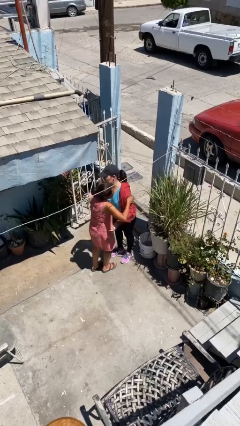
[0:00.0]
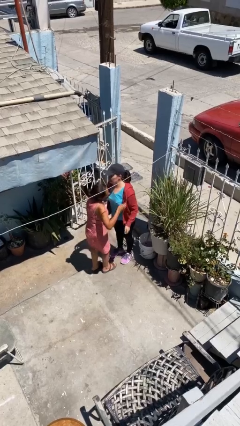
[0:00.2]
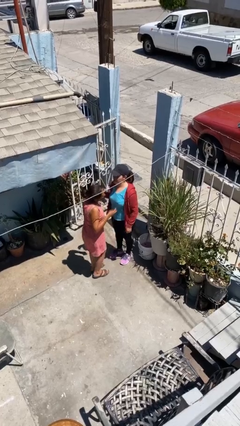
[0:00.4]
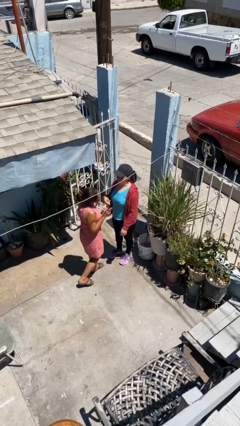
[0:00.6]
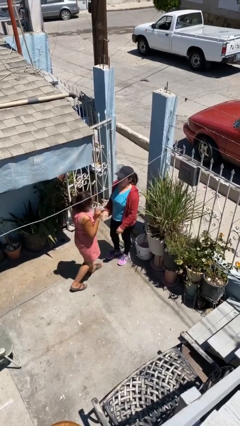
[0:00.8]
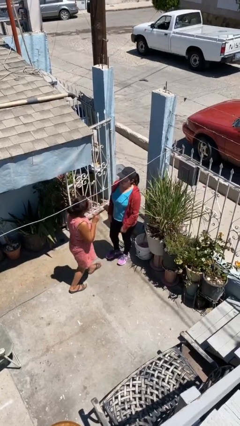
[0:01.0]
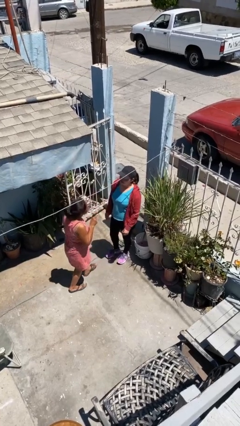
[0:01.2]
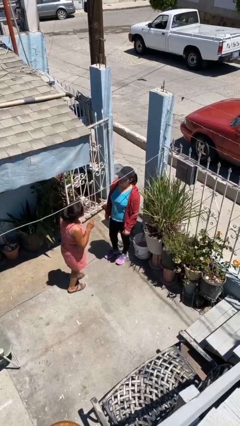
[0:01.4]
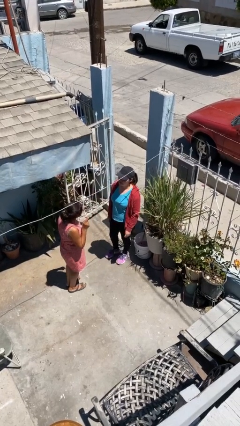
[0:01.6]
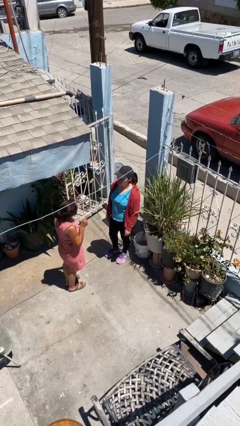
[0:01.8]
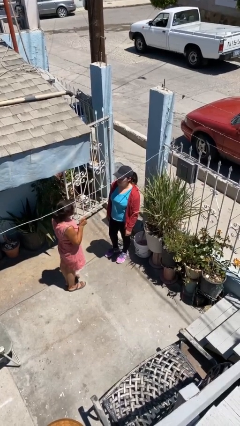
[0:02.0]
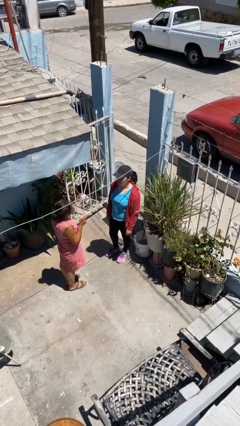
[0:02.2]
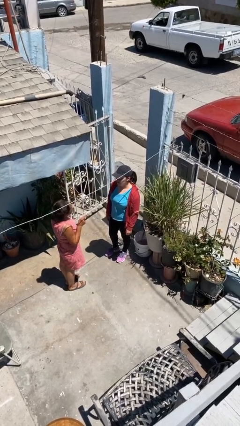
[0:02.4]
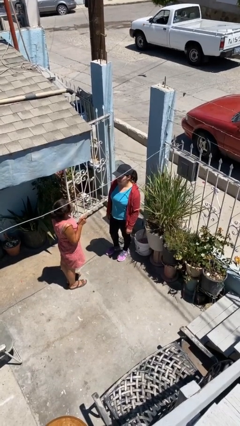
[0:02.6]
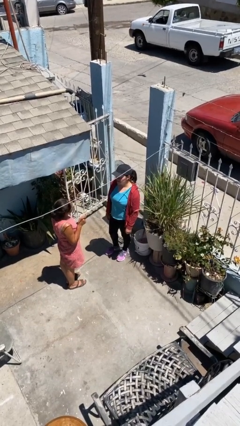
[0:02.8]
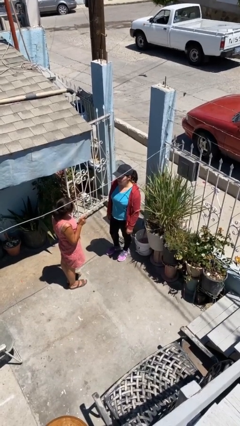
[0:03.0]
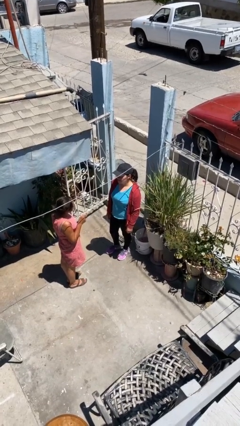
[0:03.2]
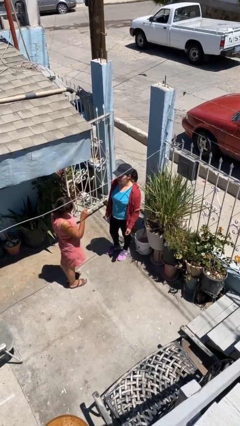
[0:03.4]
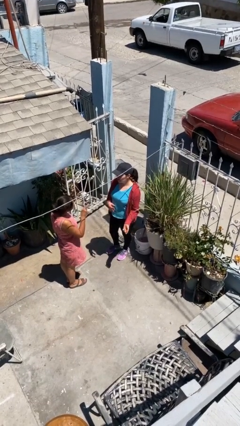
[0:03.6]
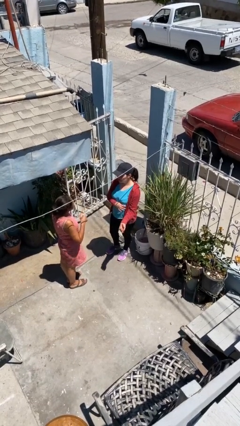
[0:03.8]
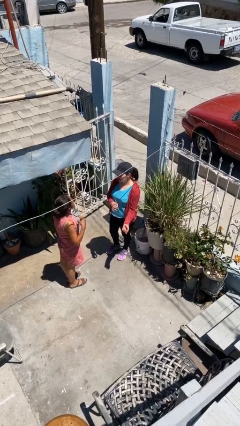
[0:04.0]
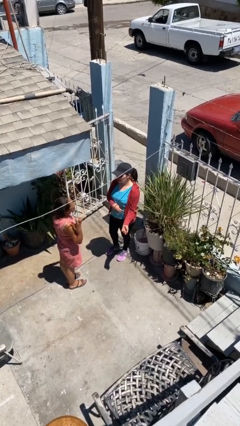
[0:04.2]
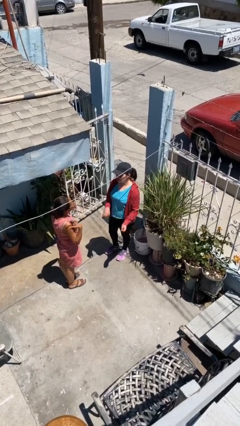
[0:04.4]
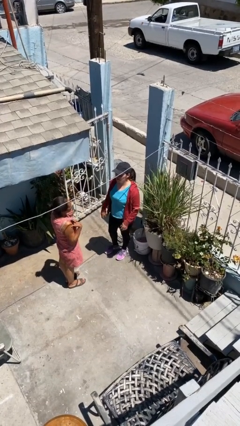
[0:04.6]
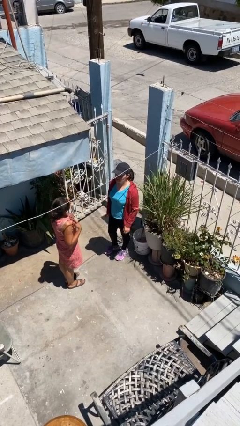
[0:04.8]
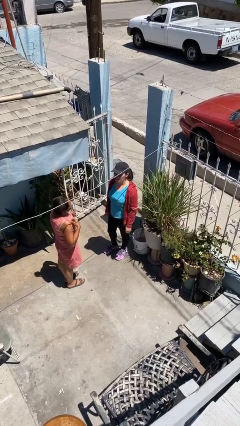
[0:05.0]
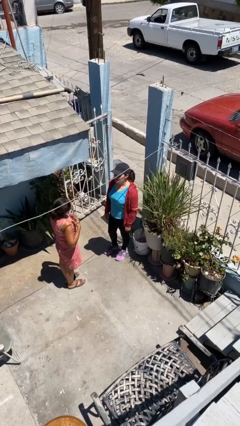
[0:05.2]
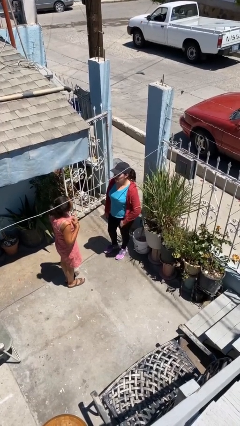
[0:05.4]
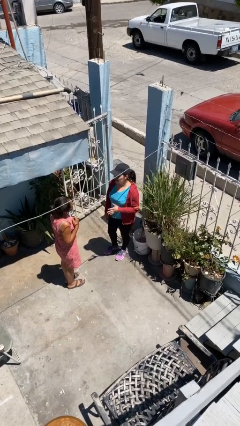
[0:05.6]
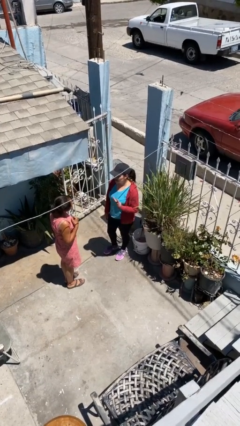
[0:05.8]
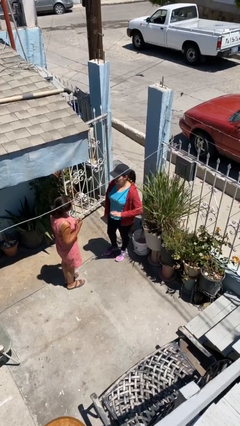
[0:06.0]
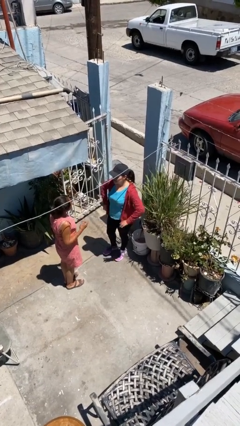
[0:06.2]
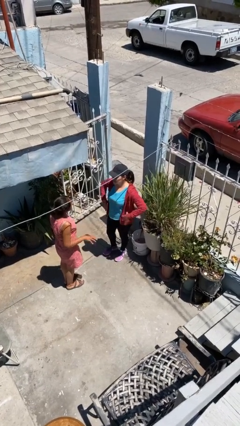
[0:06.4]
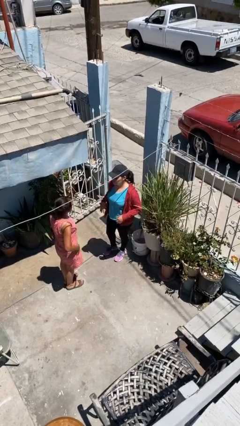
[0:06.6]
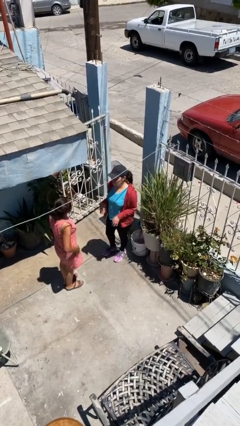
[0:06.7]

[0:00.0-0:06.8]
person talks to person

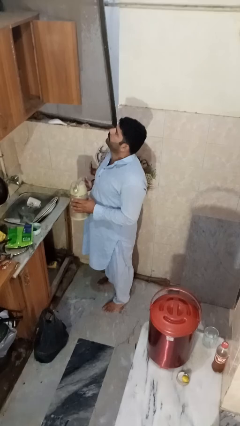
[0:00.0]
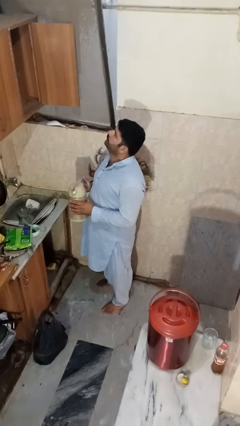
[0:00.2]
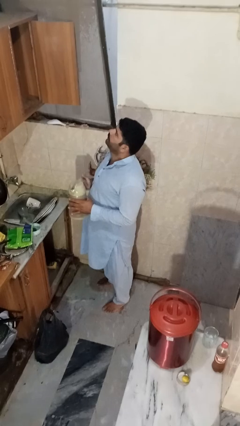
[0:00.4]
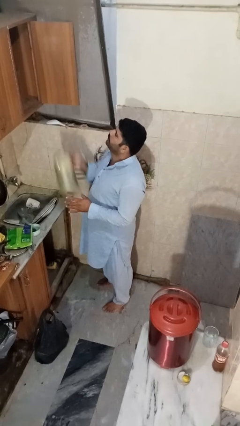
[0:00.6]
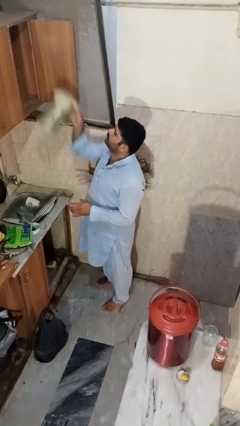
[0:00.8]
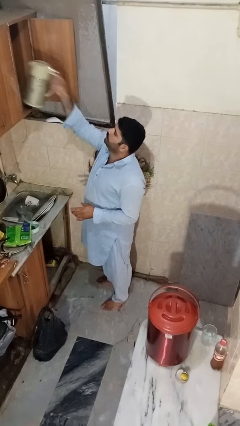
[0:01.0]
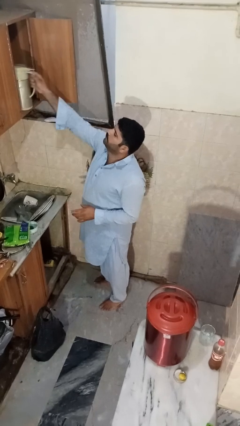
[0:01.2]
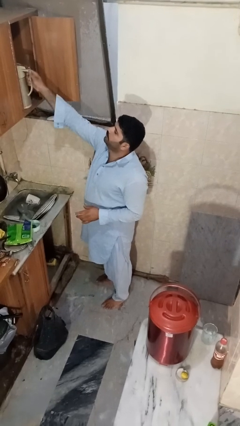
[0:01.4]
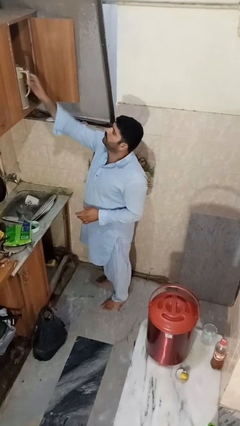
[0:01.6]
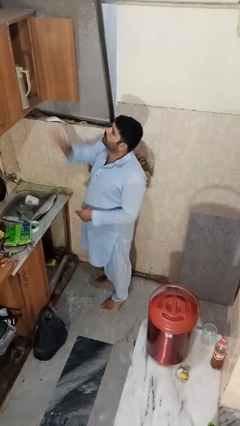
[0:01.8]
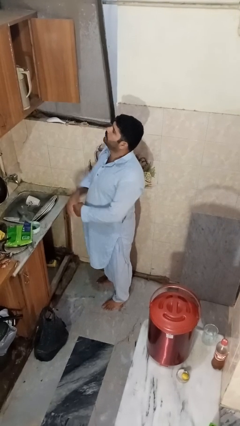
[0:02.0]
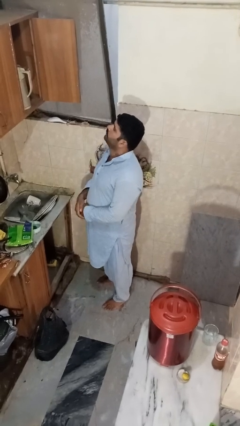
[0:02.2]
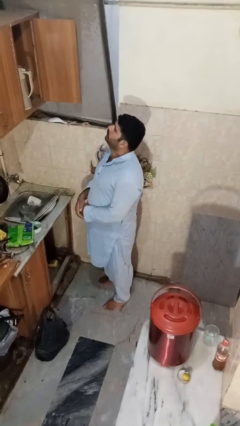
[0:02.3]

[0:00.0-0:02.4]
person puts object in cabinet

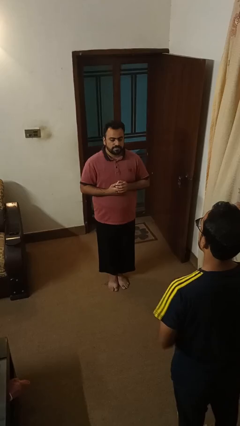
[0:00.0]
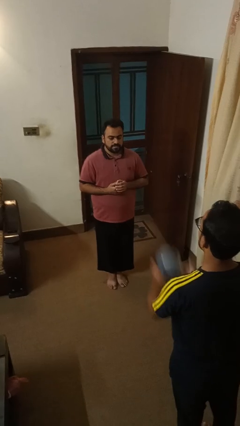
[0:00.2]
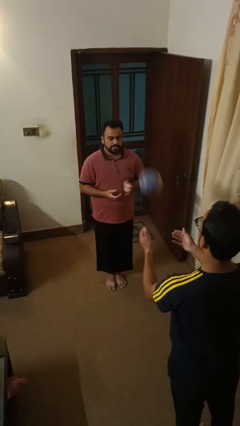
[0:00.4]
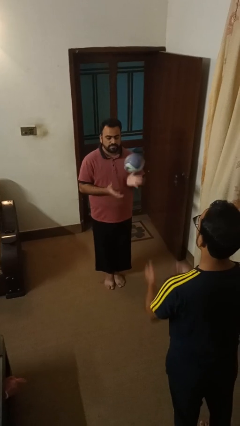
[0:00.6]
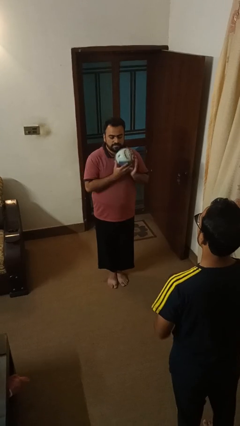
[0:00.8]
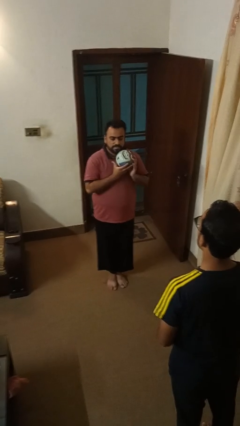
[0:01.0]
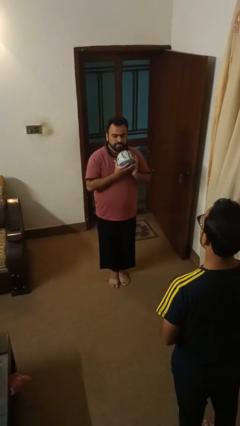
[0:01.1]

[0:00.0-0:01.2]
person catches object from person

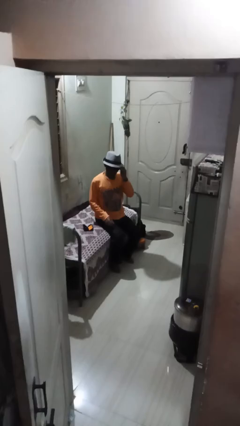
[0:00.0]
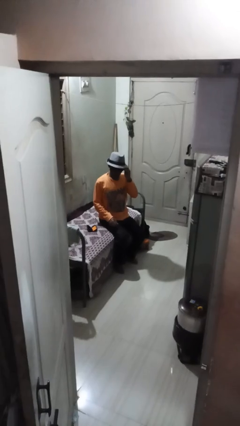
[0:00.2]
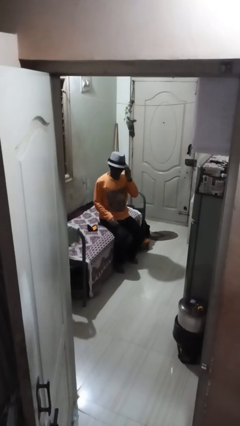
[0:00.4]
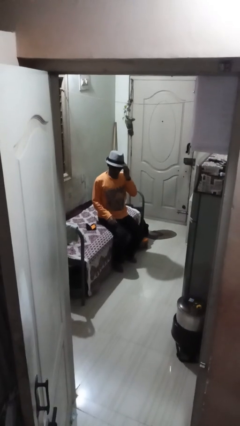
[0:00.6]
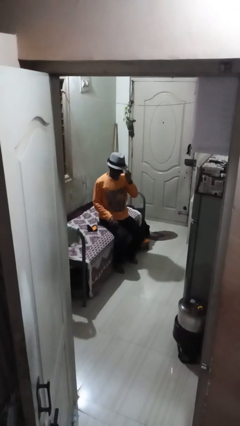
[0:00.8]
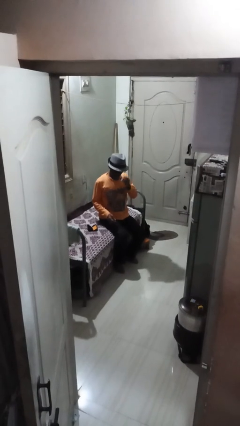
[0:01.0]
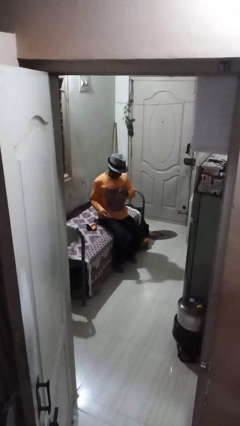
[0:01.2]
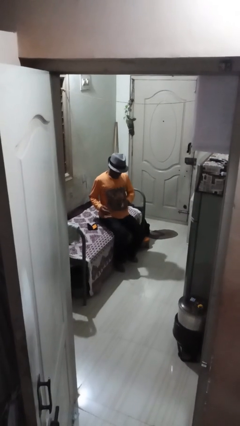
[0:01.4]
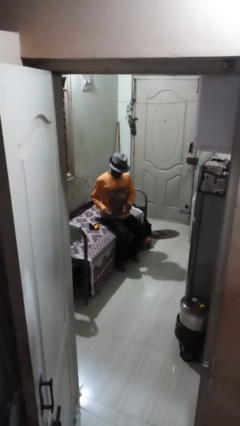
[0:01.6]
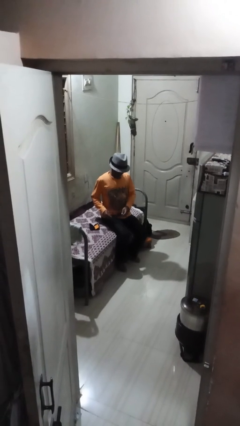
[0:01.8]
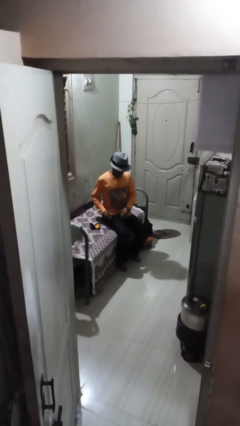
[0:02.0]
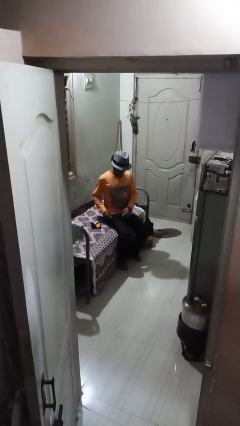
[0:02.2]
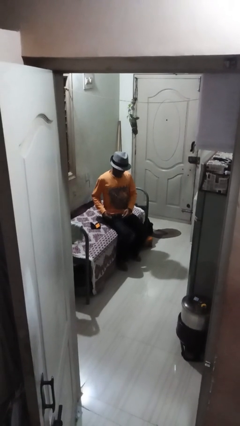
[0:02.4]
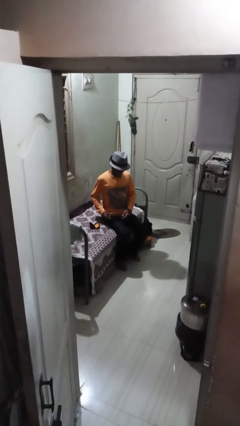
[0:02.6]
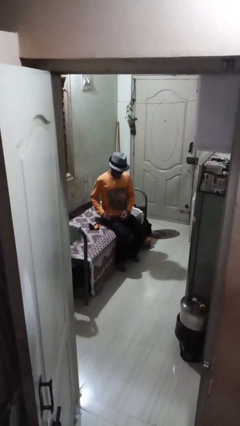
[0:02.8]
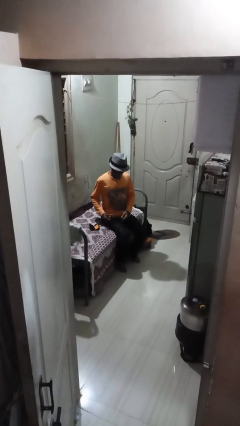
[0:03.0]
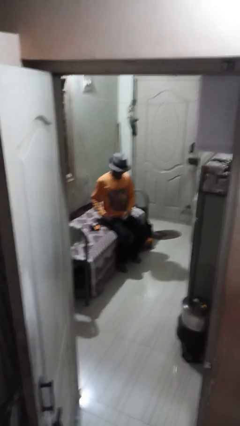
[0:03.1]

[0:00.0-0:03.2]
person takes off sunglasses

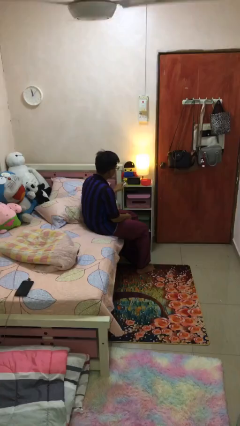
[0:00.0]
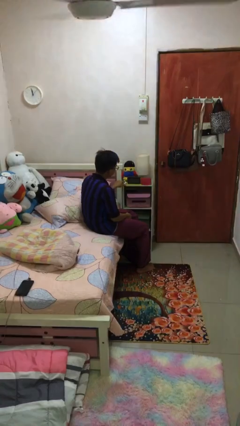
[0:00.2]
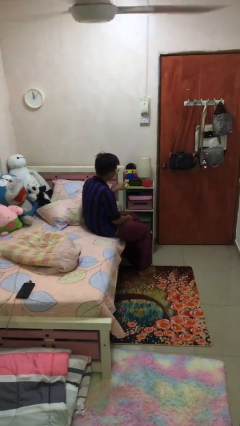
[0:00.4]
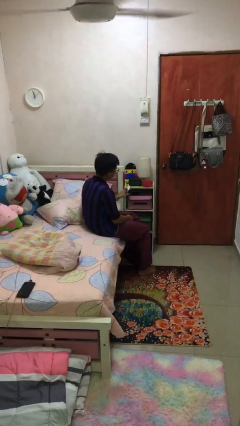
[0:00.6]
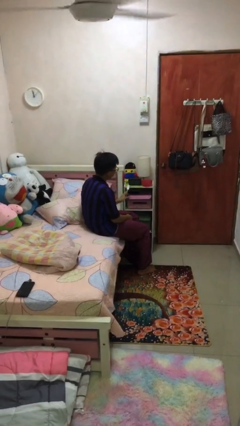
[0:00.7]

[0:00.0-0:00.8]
person turns off lamp

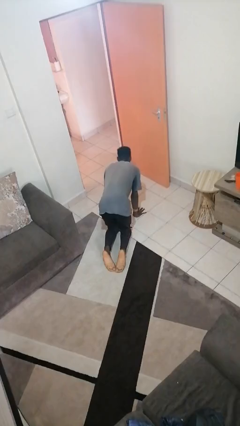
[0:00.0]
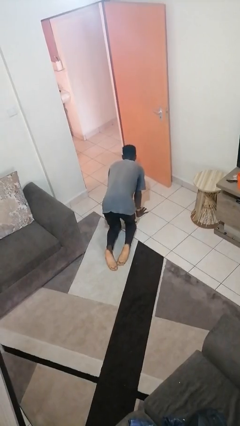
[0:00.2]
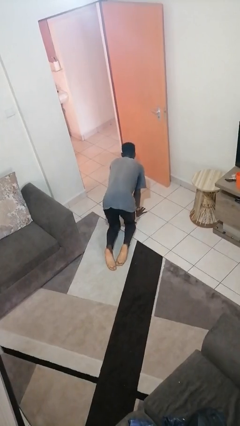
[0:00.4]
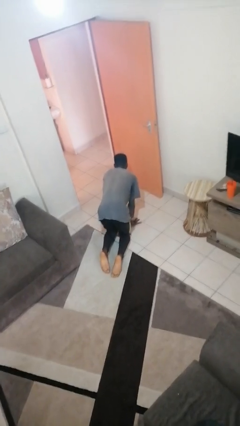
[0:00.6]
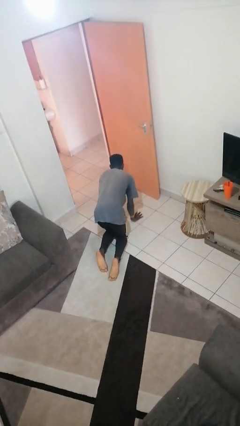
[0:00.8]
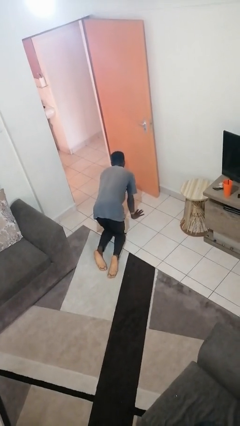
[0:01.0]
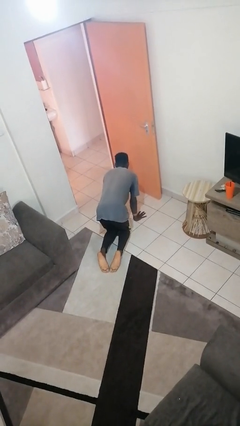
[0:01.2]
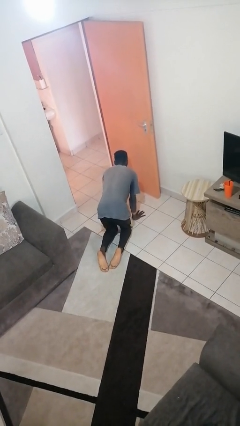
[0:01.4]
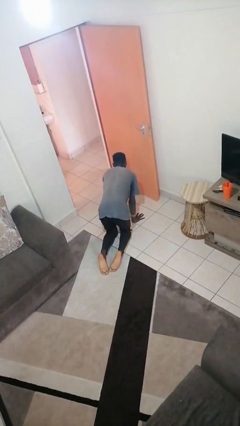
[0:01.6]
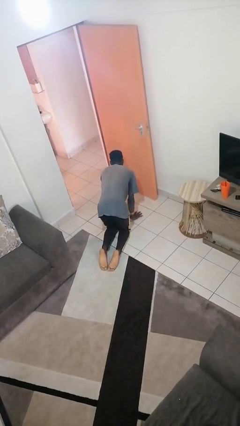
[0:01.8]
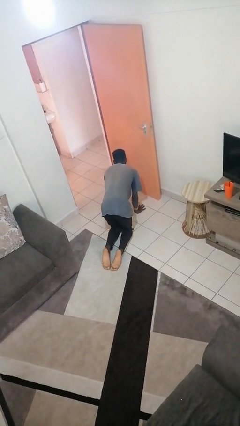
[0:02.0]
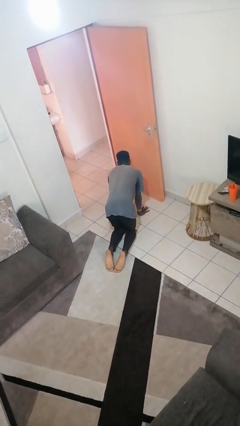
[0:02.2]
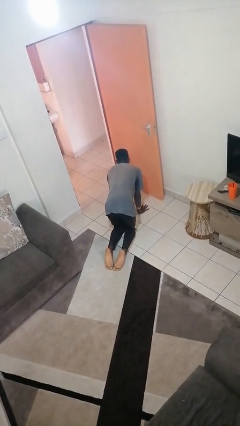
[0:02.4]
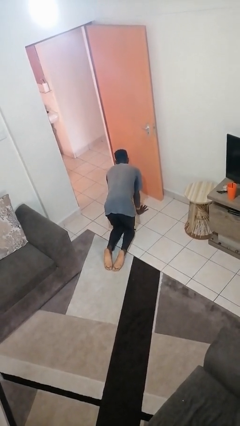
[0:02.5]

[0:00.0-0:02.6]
person crawls

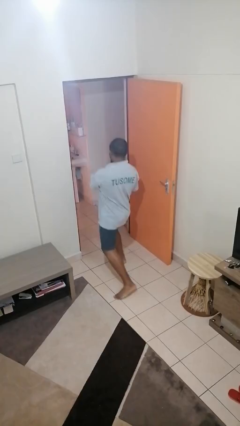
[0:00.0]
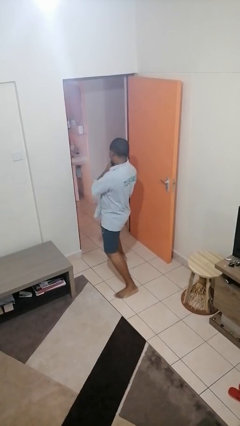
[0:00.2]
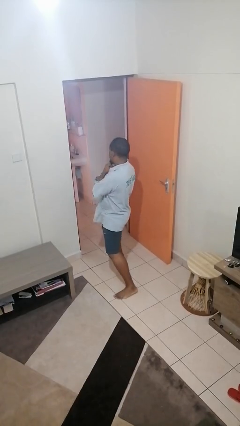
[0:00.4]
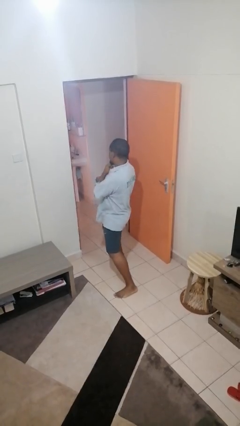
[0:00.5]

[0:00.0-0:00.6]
person karate chop
